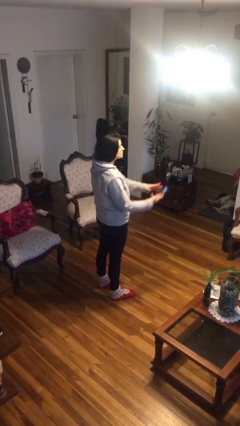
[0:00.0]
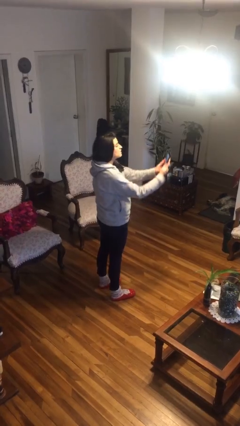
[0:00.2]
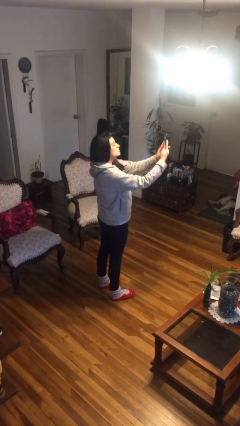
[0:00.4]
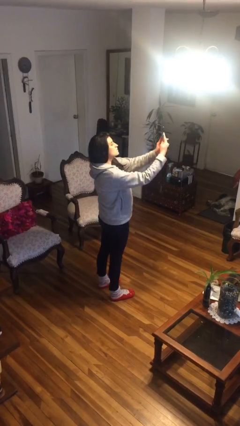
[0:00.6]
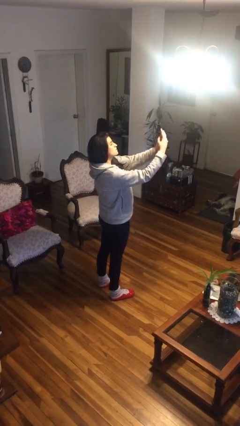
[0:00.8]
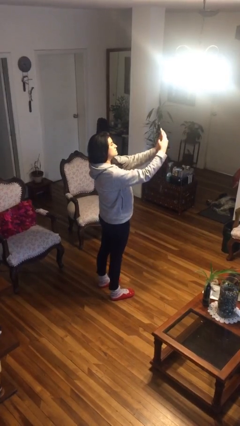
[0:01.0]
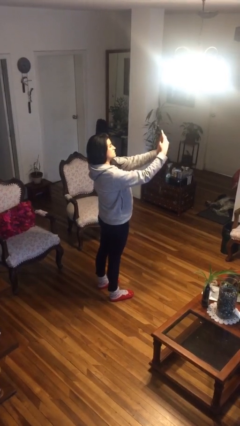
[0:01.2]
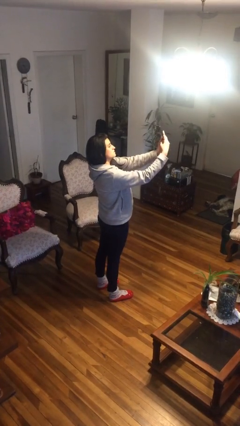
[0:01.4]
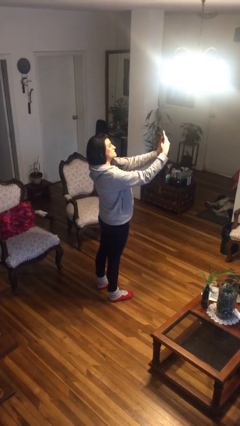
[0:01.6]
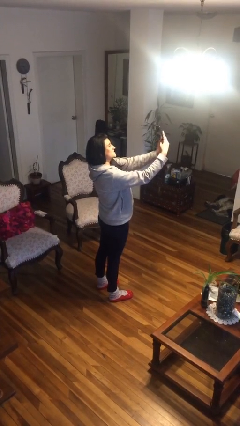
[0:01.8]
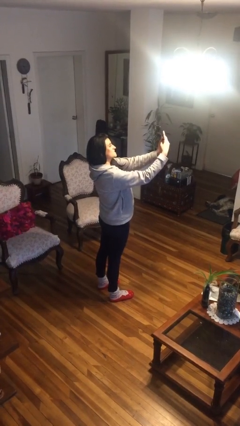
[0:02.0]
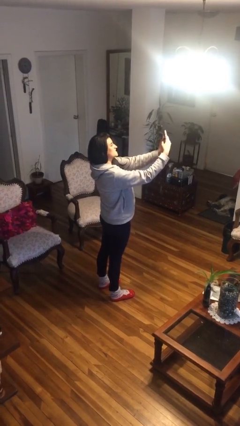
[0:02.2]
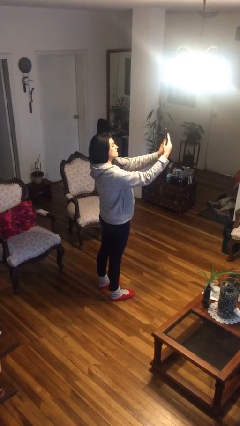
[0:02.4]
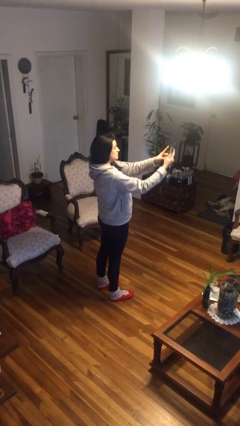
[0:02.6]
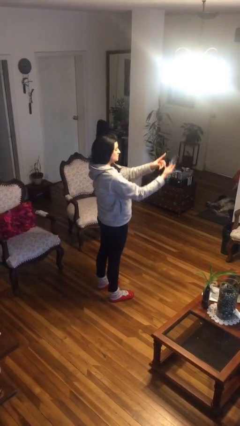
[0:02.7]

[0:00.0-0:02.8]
person takes selfie

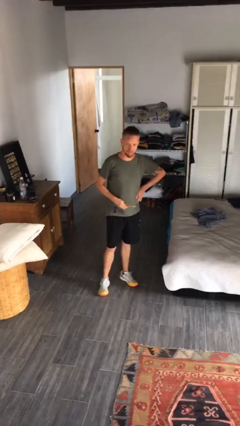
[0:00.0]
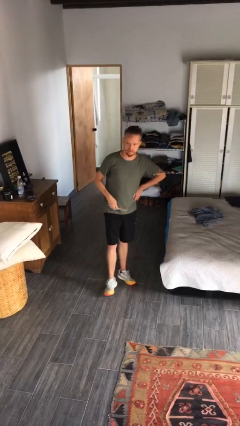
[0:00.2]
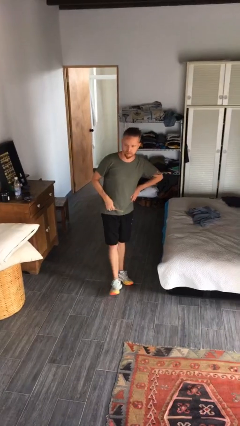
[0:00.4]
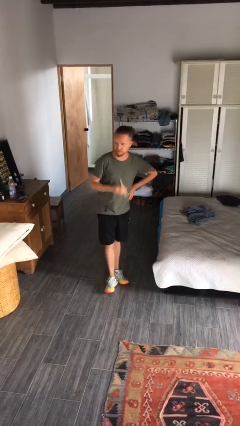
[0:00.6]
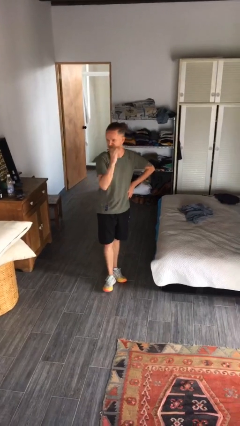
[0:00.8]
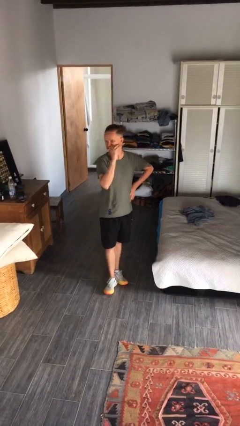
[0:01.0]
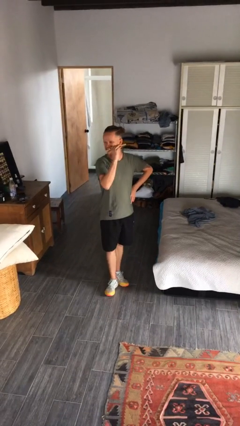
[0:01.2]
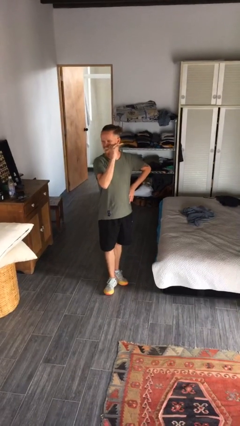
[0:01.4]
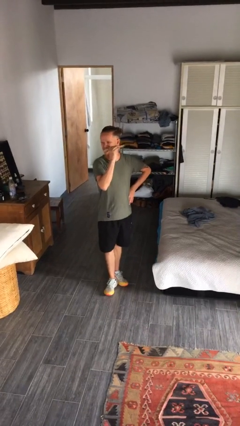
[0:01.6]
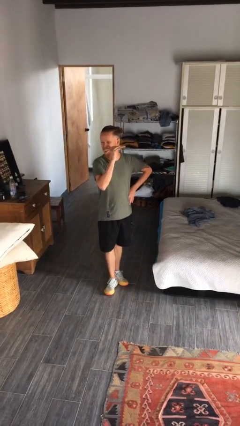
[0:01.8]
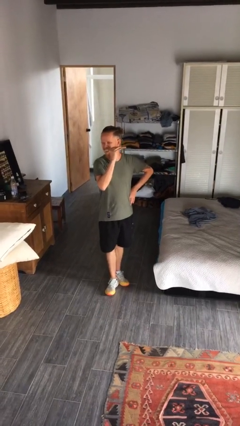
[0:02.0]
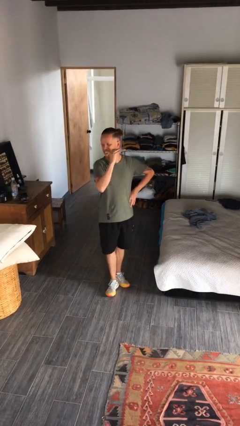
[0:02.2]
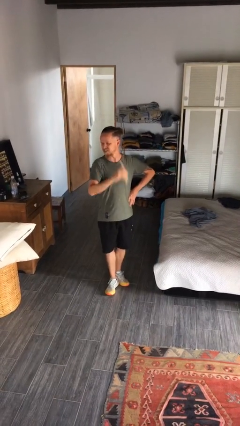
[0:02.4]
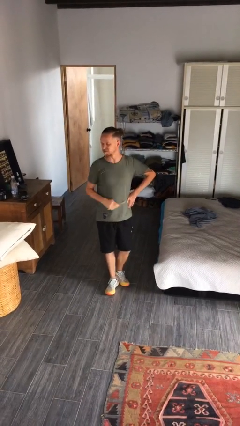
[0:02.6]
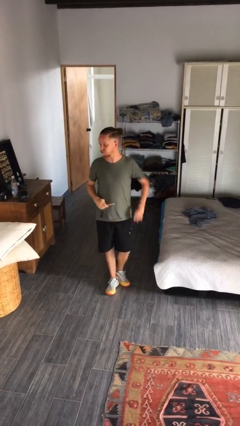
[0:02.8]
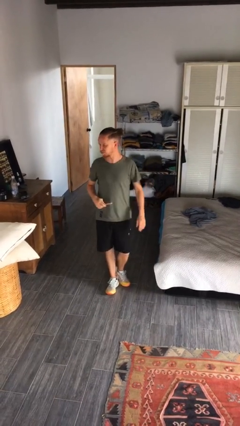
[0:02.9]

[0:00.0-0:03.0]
person brushes teeth

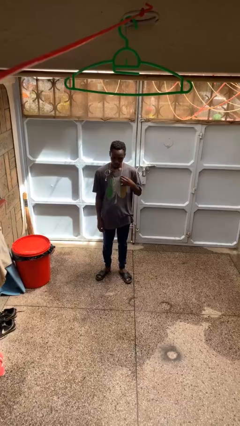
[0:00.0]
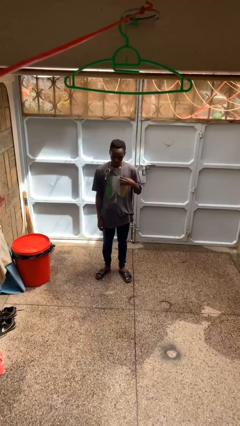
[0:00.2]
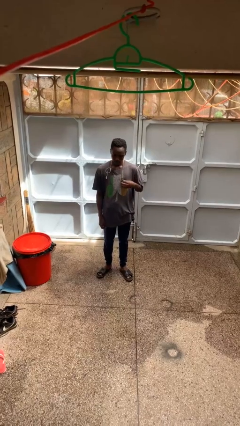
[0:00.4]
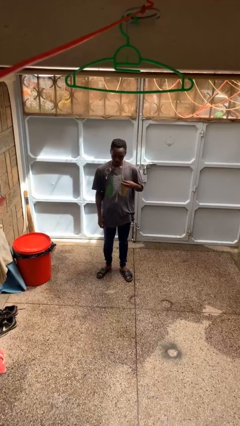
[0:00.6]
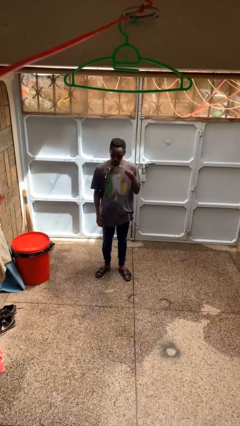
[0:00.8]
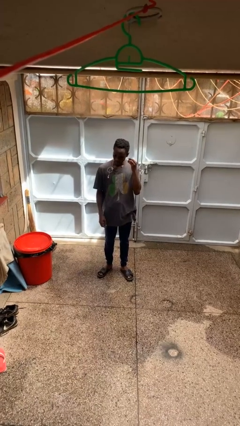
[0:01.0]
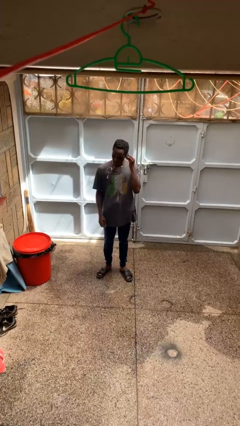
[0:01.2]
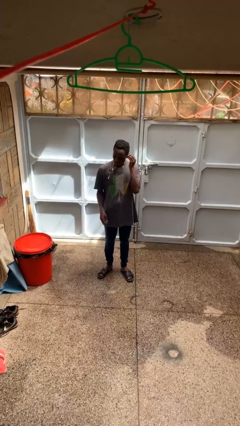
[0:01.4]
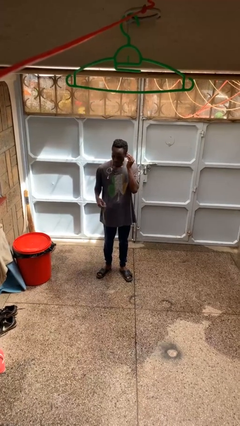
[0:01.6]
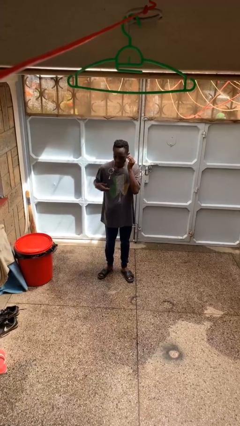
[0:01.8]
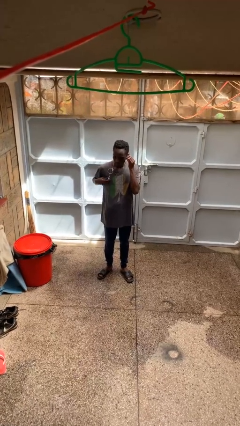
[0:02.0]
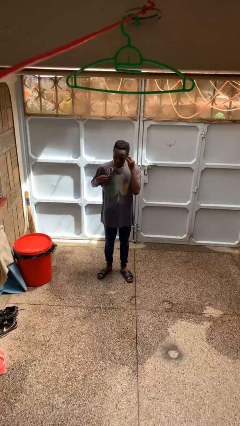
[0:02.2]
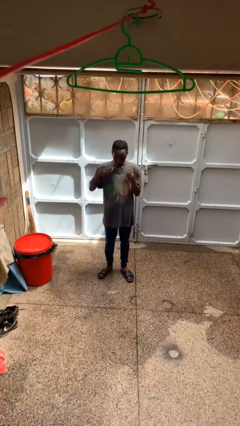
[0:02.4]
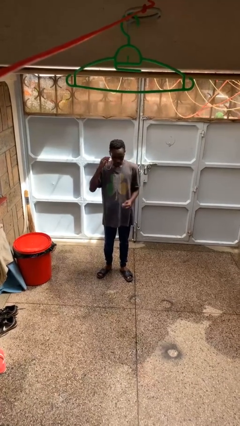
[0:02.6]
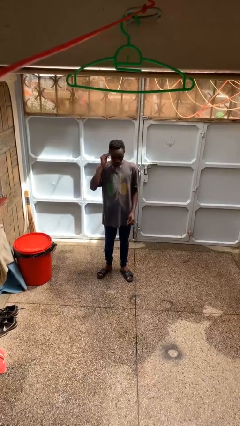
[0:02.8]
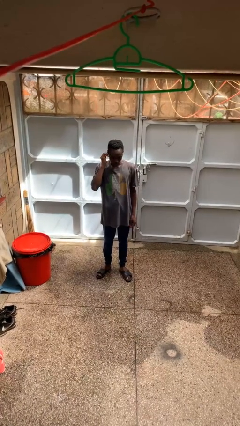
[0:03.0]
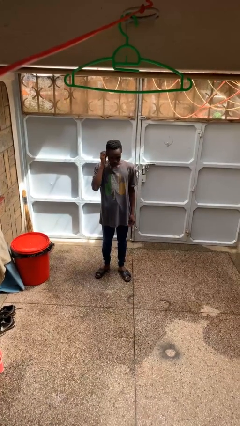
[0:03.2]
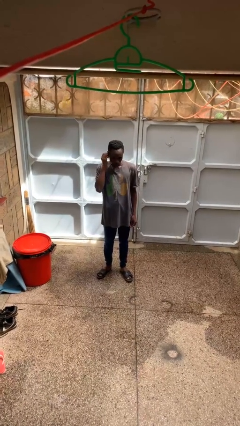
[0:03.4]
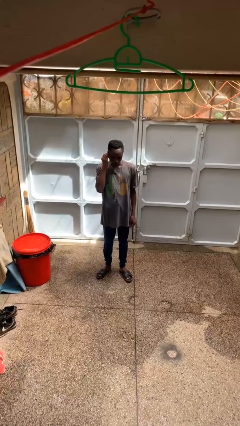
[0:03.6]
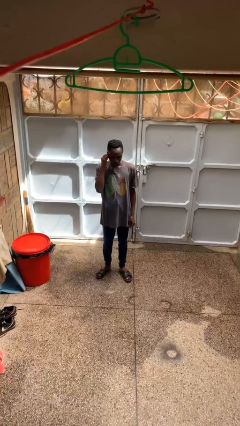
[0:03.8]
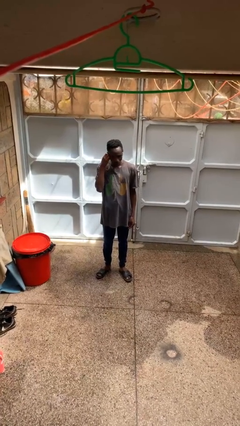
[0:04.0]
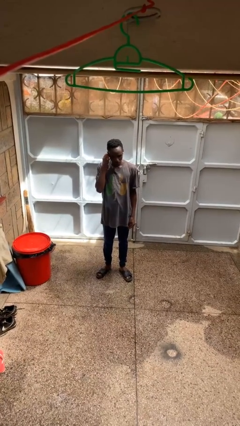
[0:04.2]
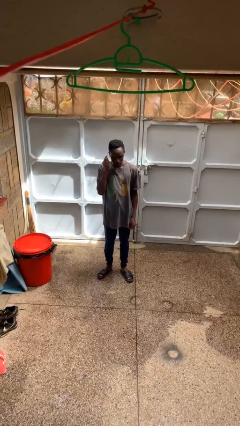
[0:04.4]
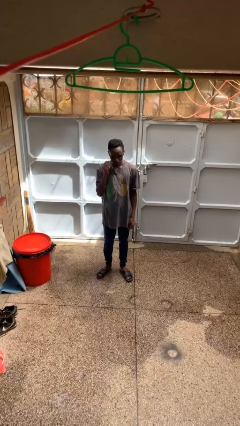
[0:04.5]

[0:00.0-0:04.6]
person puts on headphones

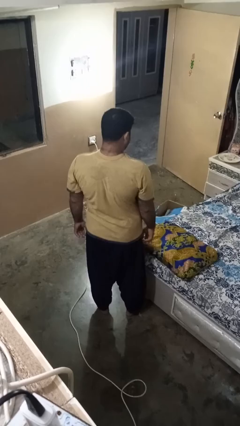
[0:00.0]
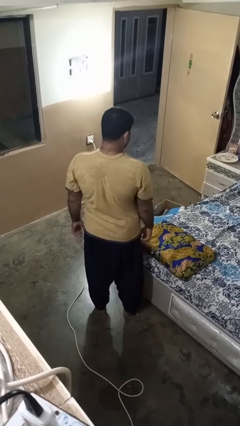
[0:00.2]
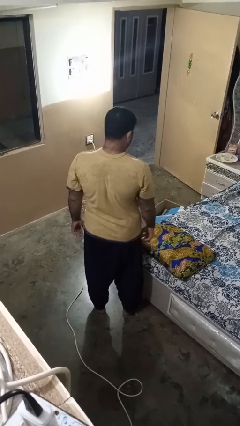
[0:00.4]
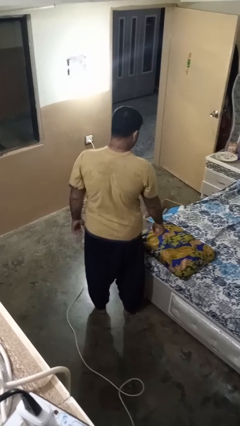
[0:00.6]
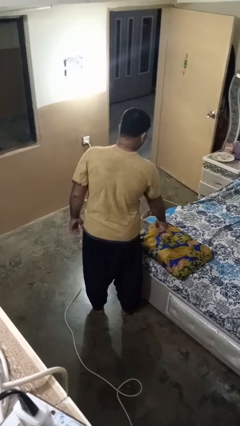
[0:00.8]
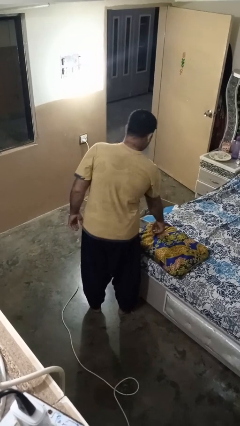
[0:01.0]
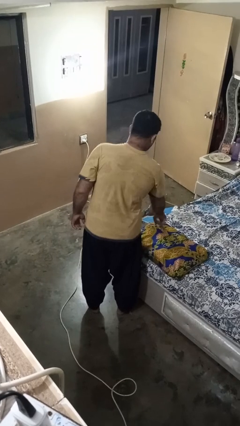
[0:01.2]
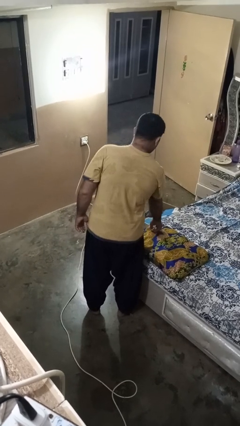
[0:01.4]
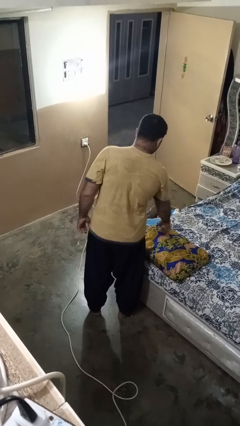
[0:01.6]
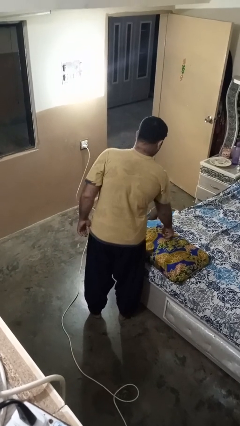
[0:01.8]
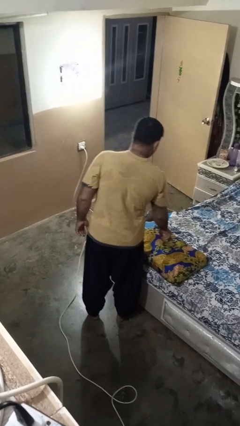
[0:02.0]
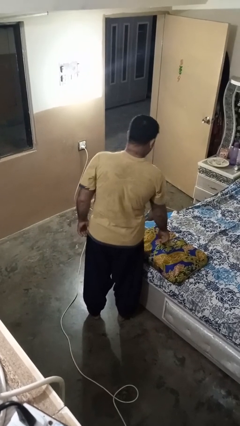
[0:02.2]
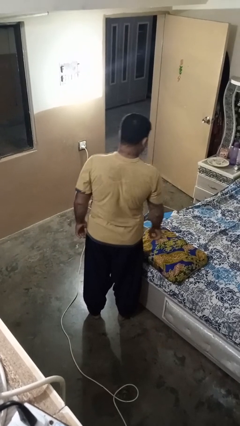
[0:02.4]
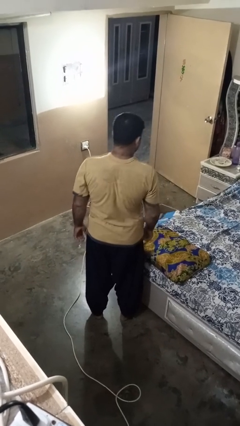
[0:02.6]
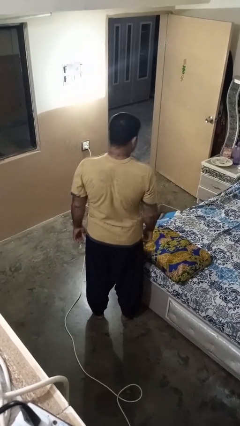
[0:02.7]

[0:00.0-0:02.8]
person taps object with finger

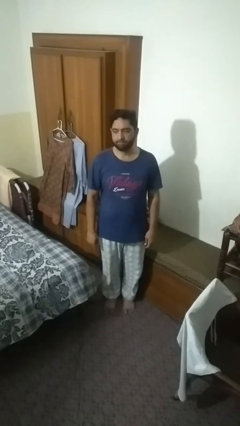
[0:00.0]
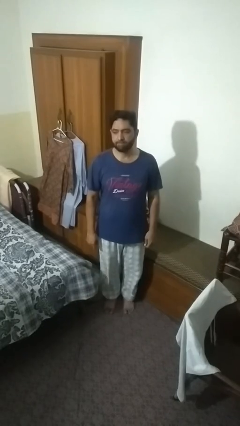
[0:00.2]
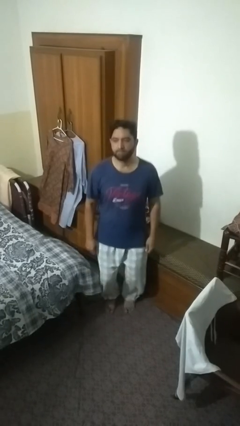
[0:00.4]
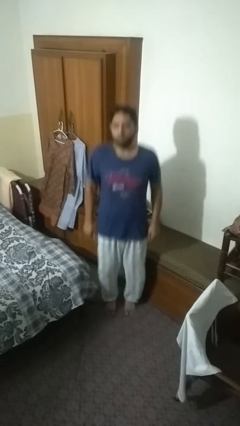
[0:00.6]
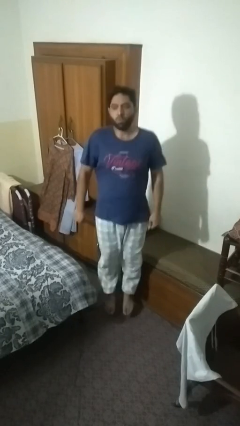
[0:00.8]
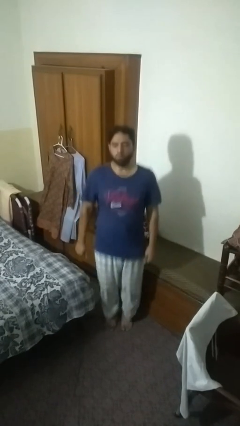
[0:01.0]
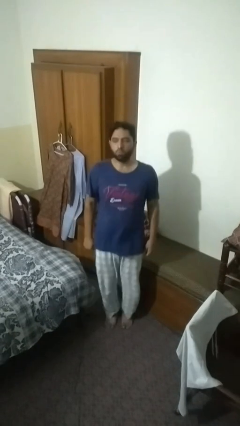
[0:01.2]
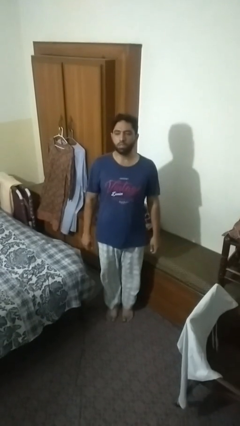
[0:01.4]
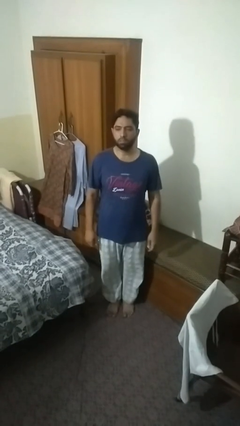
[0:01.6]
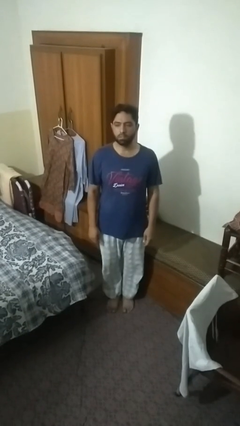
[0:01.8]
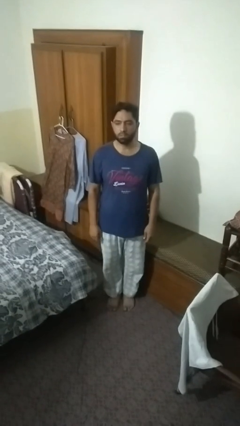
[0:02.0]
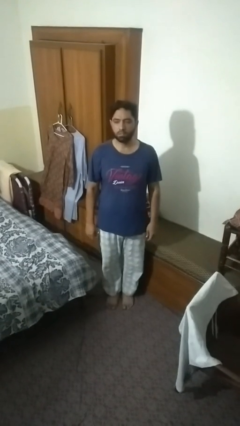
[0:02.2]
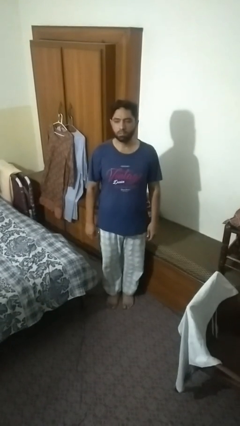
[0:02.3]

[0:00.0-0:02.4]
person jumps

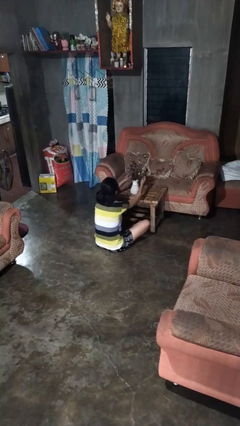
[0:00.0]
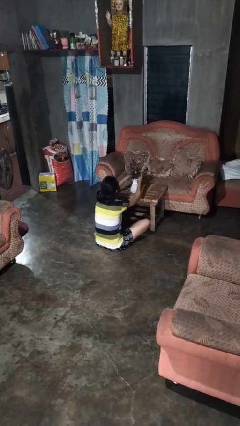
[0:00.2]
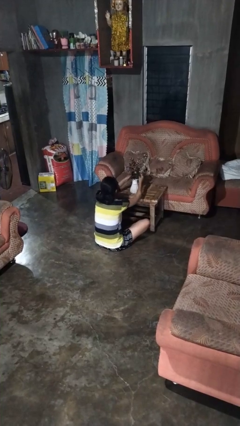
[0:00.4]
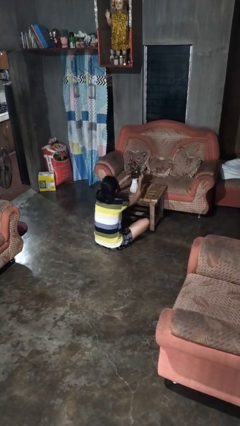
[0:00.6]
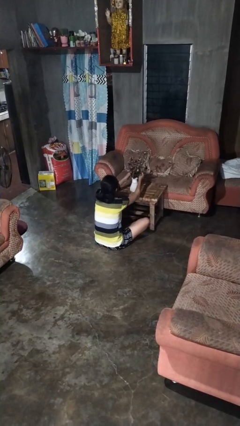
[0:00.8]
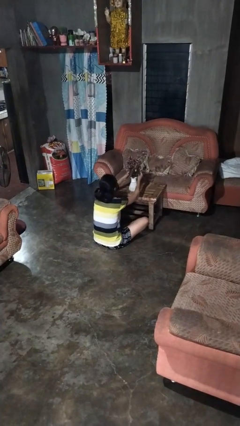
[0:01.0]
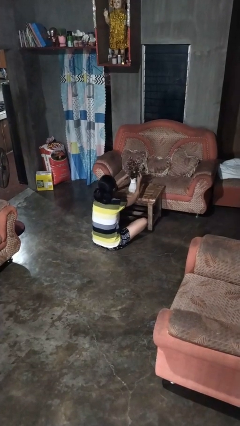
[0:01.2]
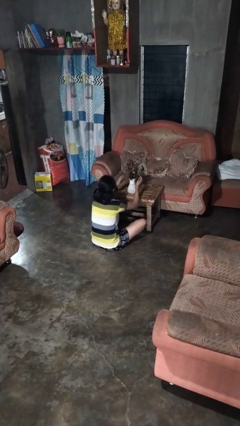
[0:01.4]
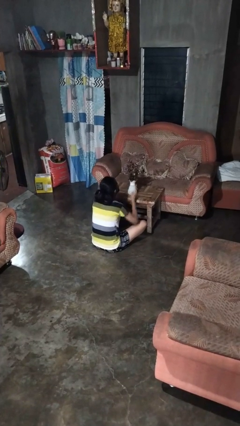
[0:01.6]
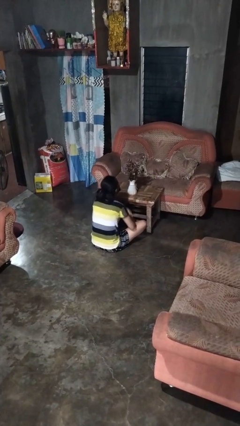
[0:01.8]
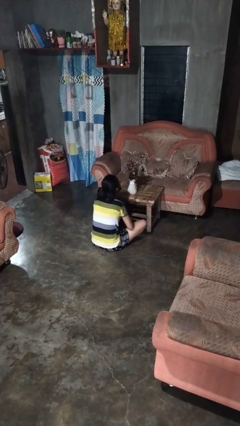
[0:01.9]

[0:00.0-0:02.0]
person arranges flowers in vase
